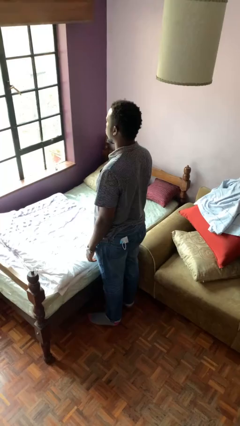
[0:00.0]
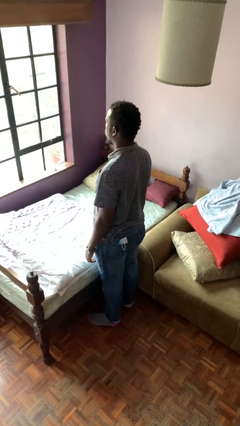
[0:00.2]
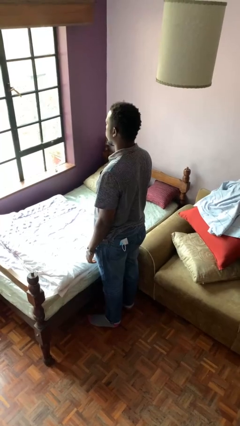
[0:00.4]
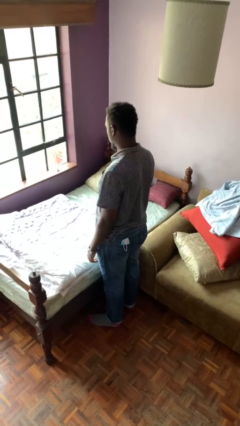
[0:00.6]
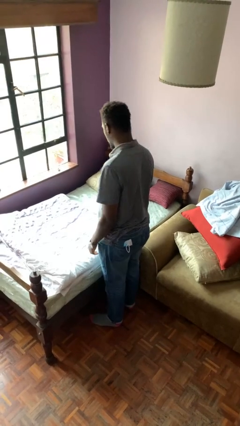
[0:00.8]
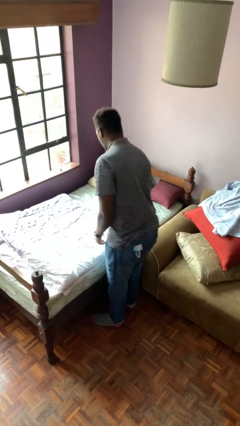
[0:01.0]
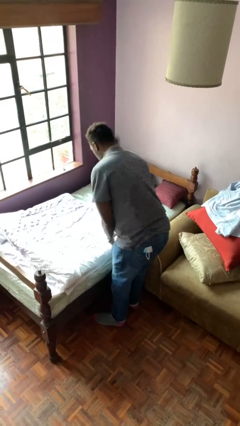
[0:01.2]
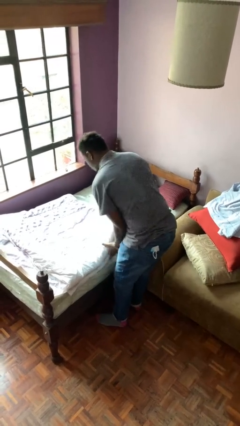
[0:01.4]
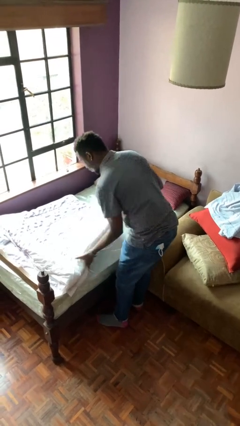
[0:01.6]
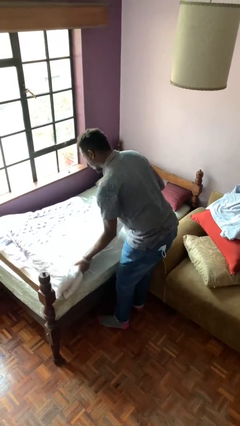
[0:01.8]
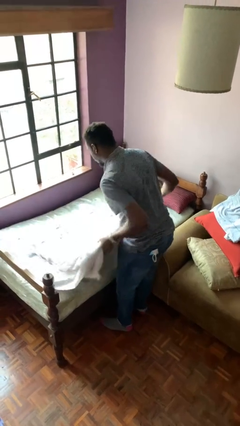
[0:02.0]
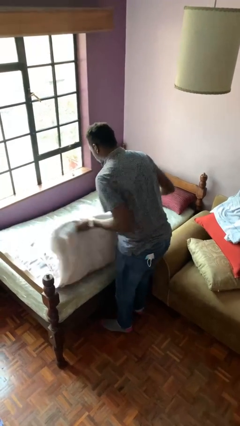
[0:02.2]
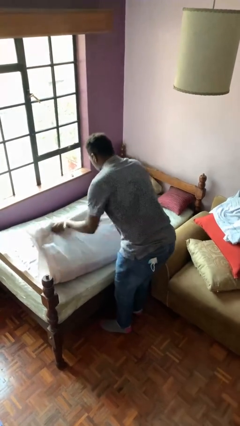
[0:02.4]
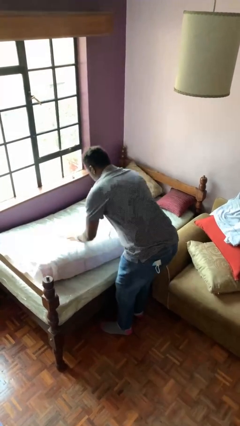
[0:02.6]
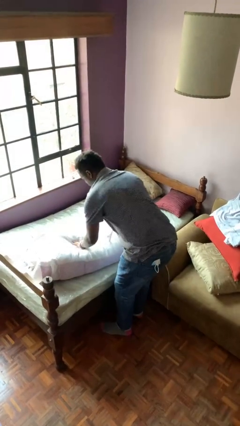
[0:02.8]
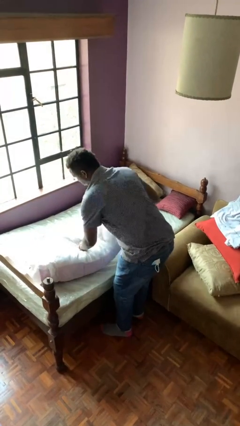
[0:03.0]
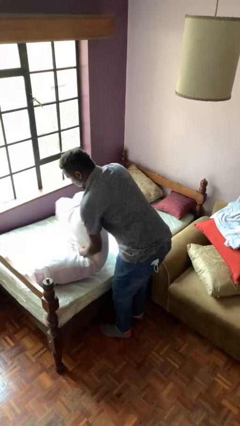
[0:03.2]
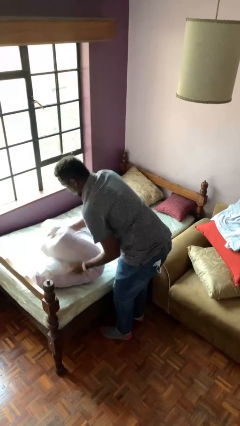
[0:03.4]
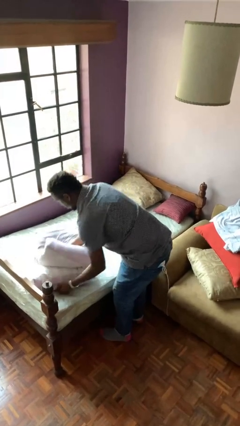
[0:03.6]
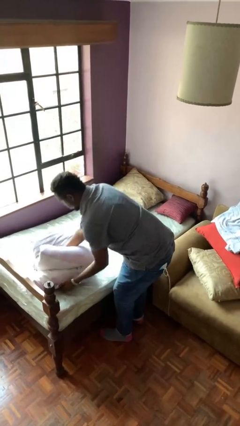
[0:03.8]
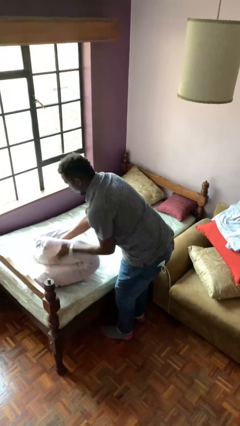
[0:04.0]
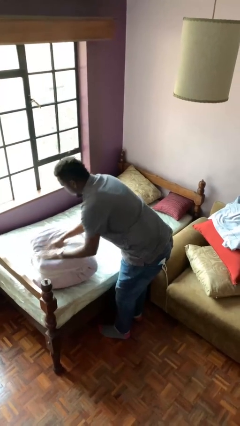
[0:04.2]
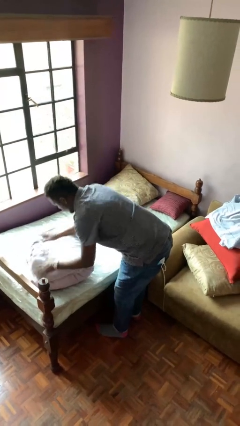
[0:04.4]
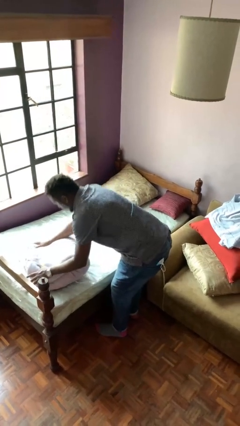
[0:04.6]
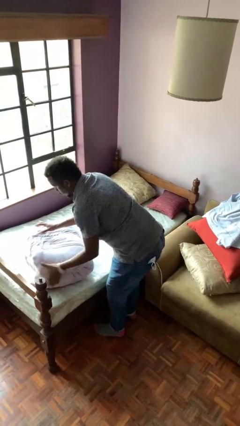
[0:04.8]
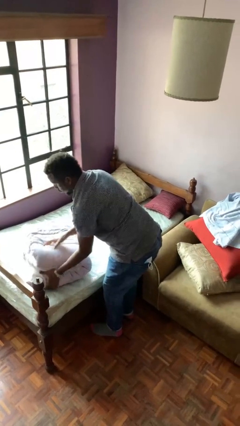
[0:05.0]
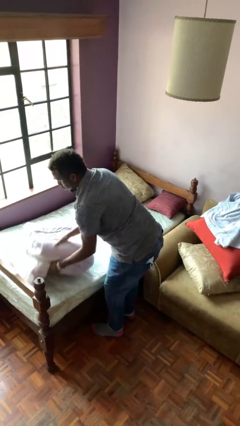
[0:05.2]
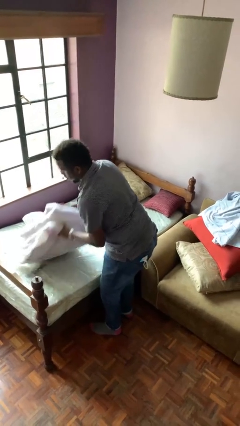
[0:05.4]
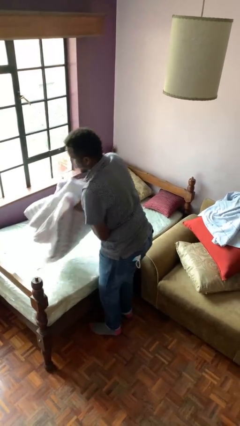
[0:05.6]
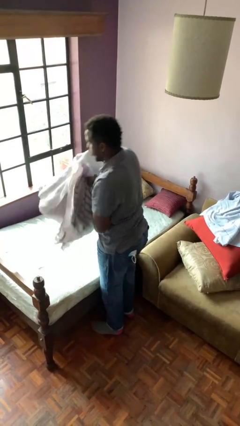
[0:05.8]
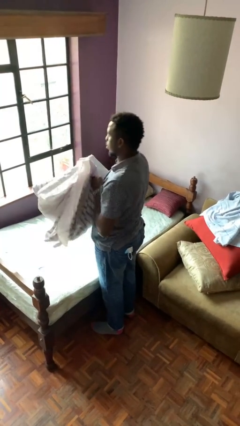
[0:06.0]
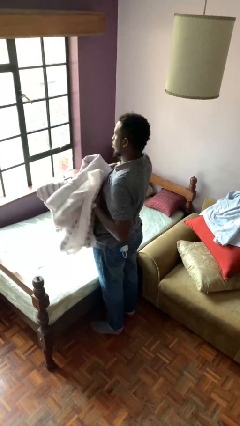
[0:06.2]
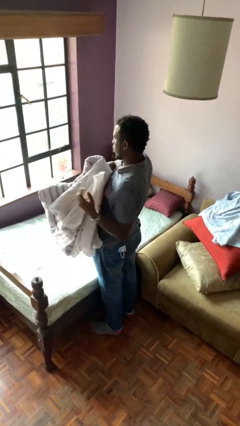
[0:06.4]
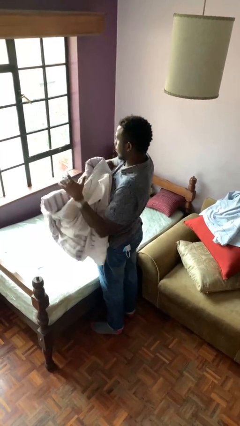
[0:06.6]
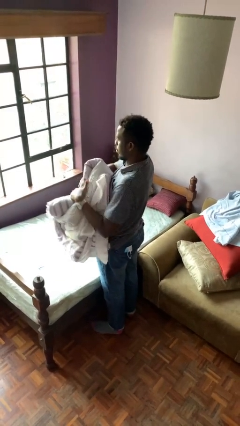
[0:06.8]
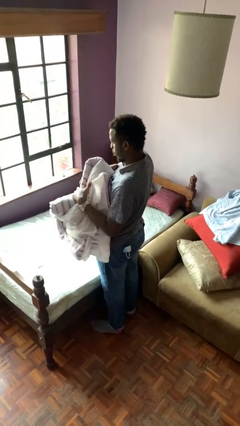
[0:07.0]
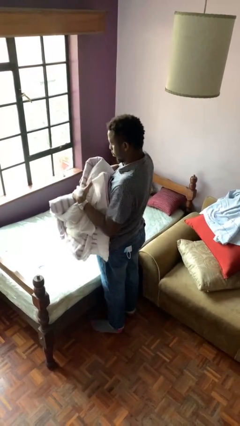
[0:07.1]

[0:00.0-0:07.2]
person folds blanket

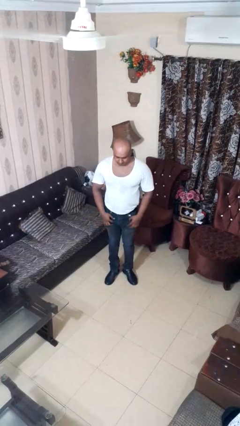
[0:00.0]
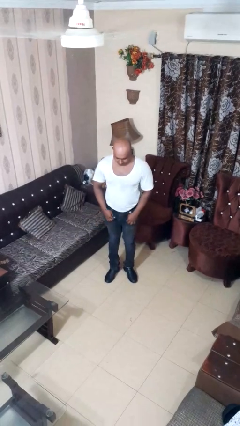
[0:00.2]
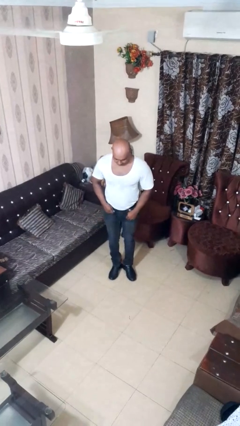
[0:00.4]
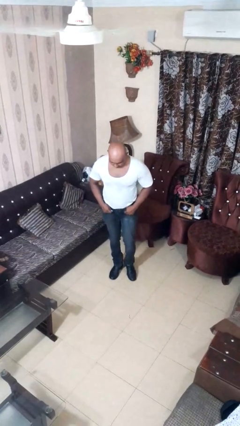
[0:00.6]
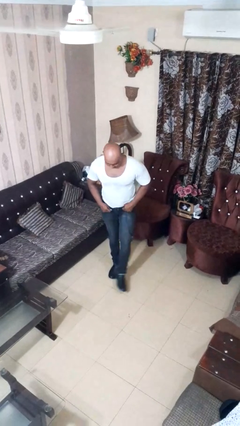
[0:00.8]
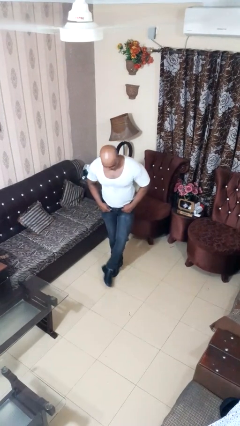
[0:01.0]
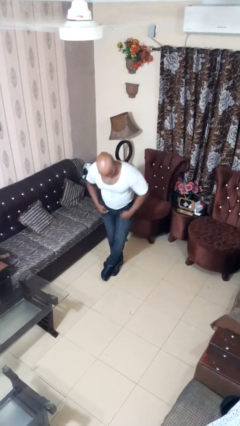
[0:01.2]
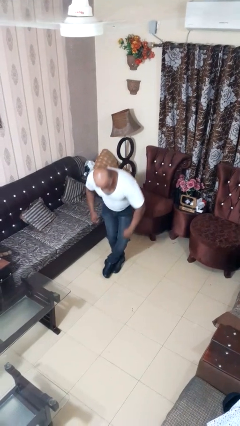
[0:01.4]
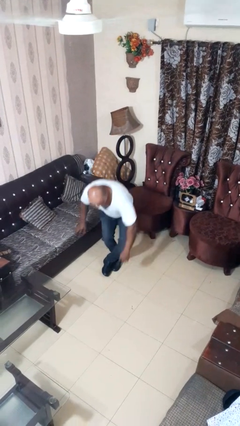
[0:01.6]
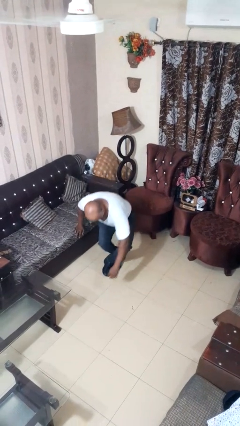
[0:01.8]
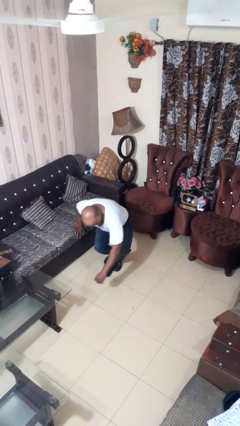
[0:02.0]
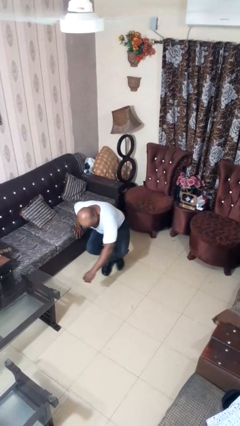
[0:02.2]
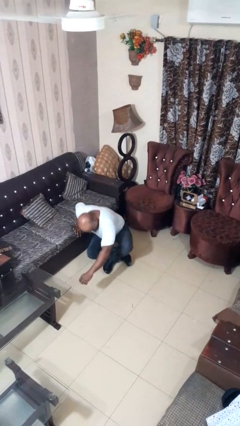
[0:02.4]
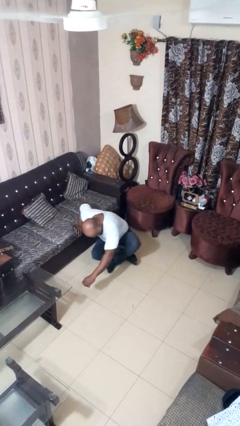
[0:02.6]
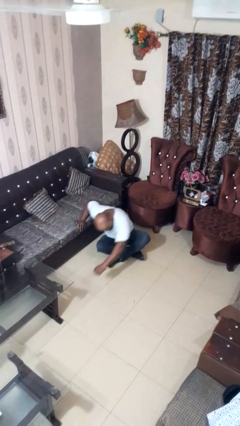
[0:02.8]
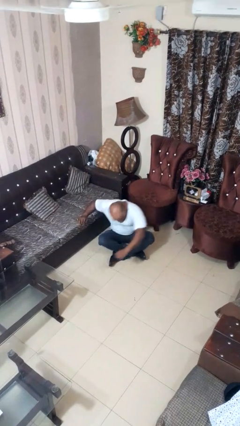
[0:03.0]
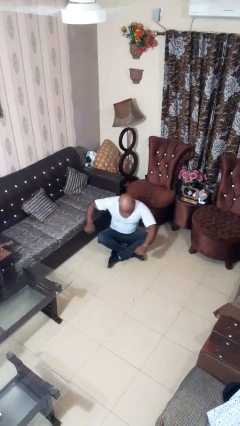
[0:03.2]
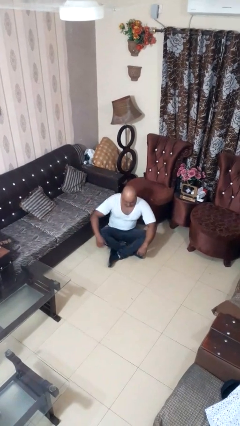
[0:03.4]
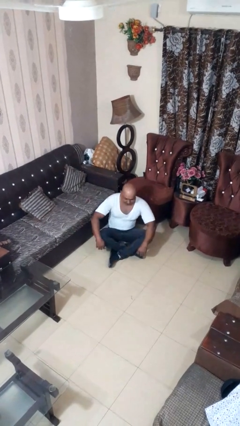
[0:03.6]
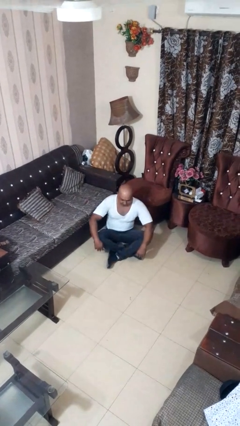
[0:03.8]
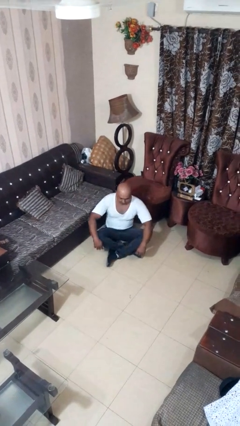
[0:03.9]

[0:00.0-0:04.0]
person sits crisscross

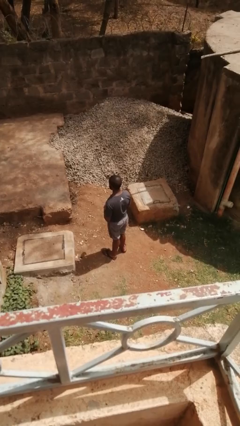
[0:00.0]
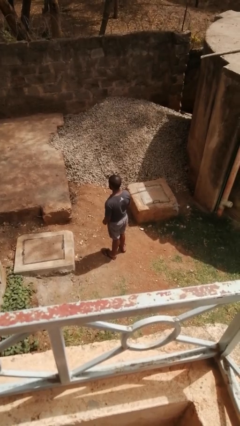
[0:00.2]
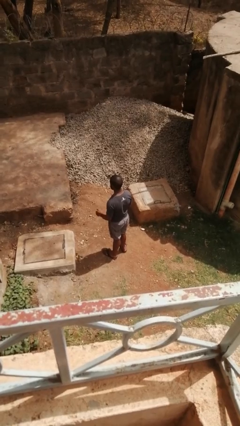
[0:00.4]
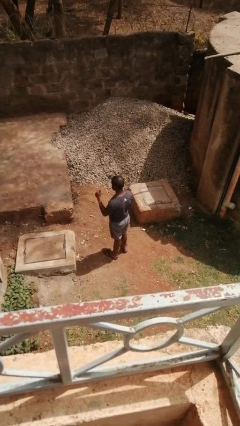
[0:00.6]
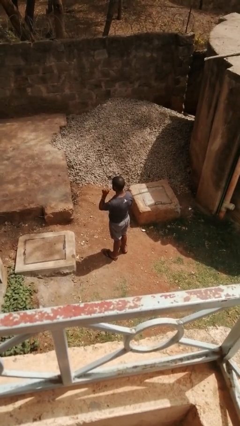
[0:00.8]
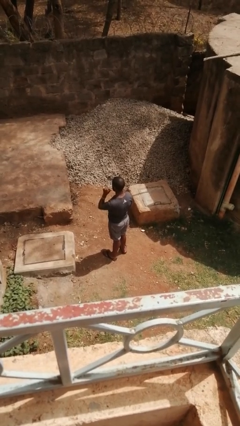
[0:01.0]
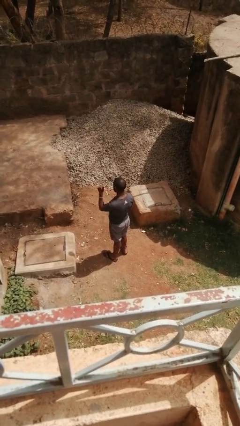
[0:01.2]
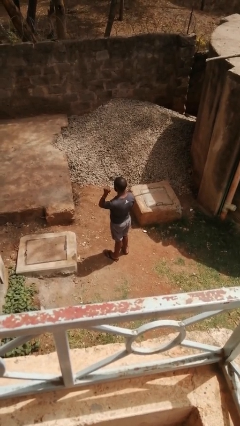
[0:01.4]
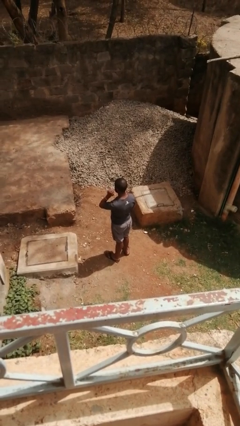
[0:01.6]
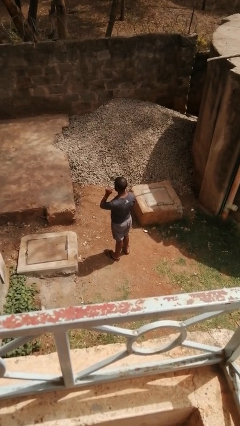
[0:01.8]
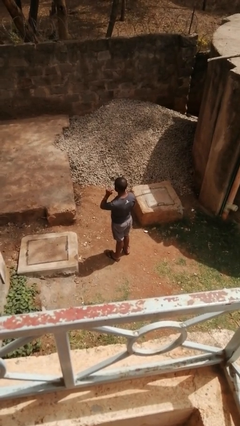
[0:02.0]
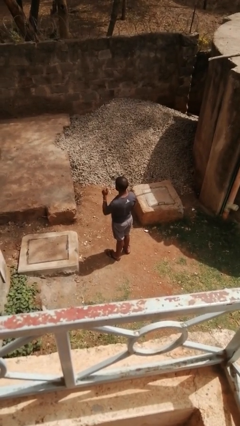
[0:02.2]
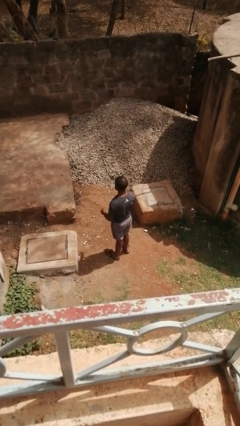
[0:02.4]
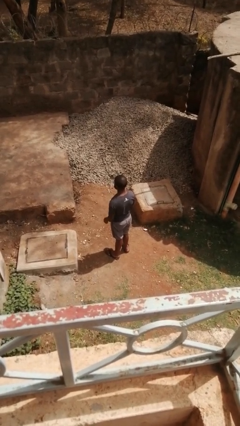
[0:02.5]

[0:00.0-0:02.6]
person gestures behind me

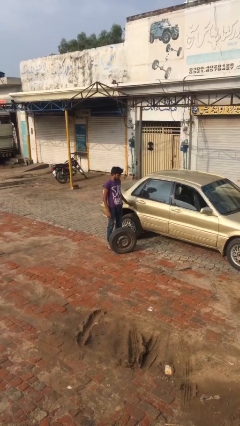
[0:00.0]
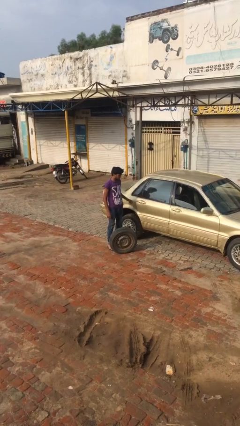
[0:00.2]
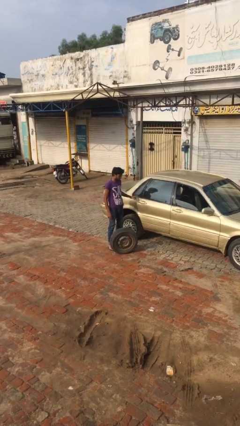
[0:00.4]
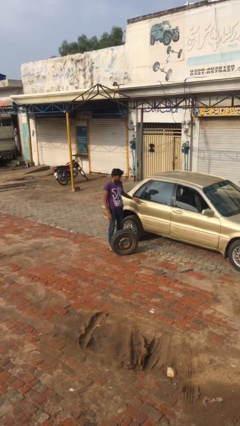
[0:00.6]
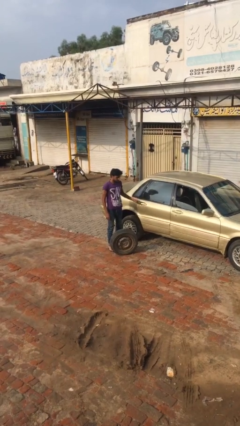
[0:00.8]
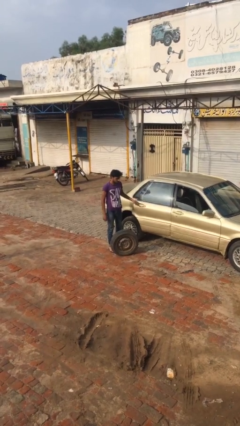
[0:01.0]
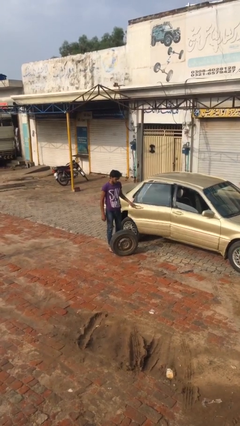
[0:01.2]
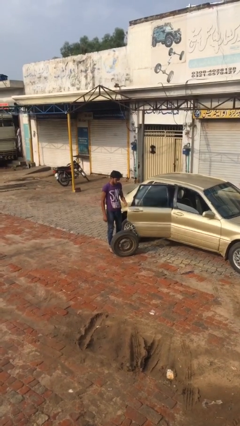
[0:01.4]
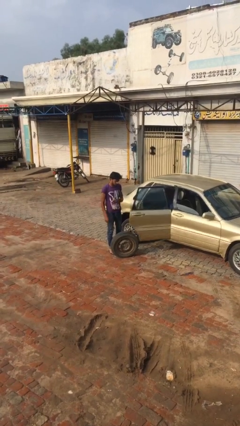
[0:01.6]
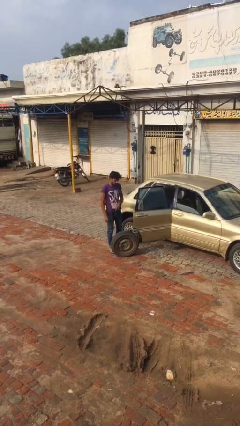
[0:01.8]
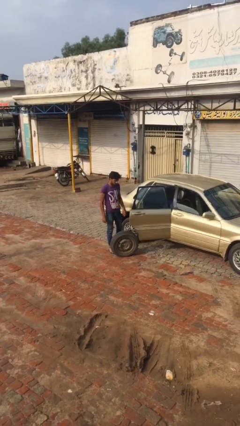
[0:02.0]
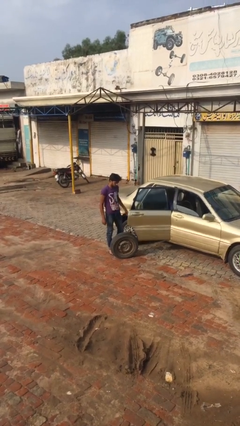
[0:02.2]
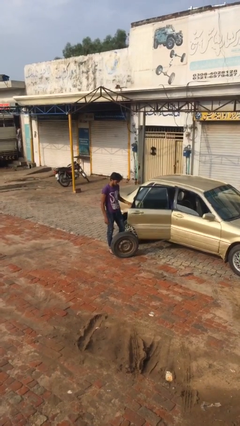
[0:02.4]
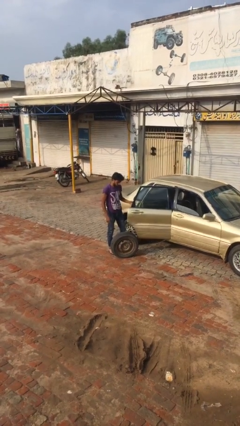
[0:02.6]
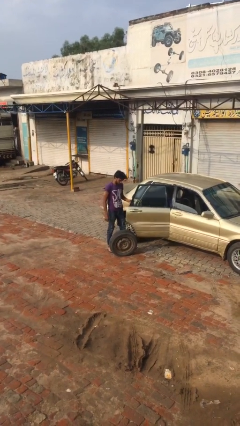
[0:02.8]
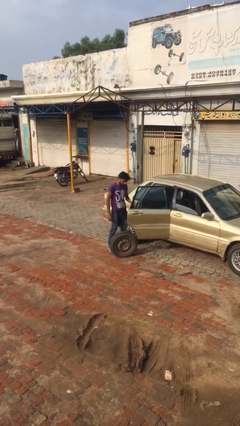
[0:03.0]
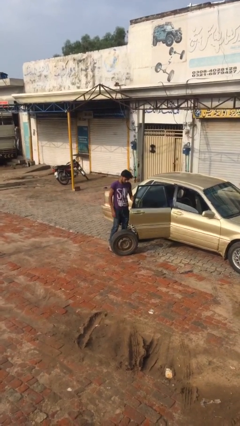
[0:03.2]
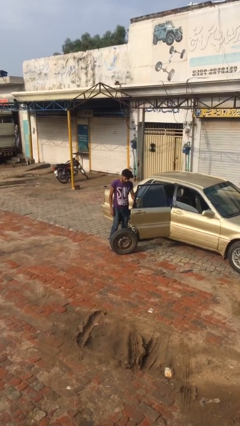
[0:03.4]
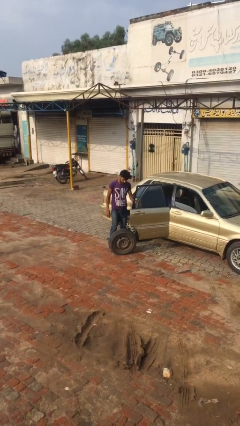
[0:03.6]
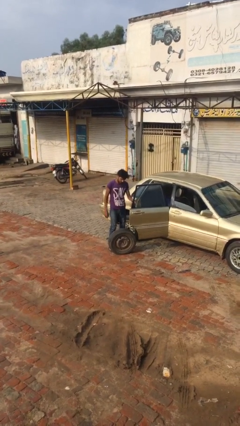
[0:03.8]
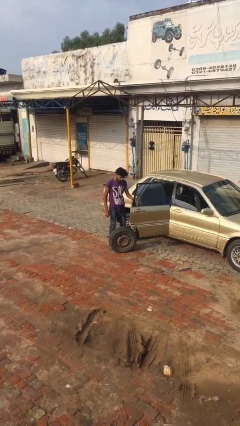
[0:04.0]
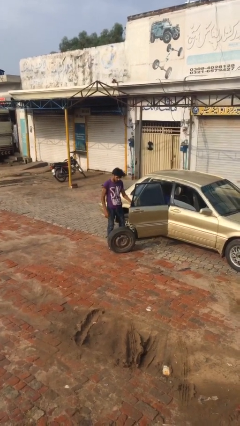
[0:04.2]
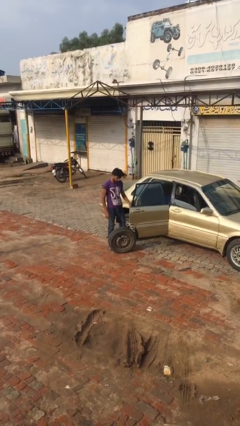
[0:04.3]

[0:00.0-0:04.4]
person opens car door
